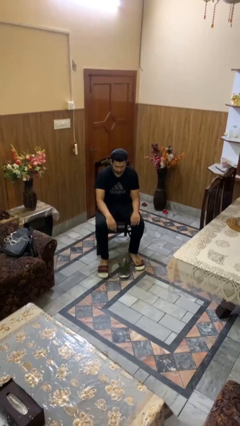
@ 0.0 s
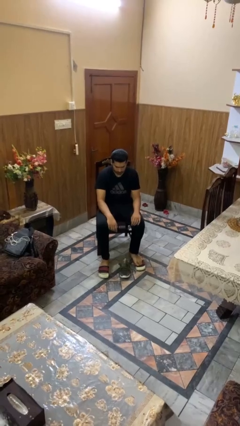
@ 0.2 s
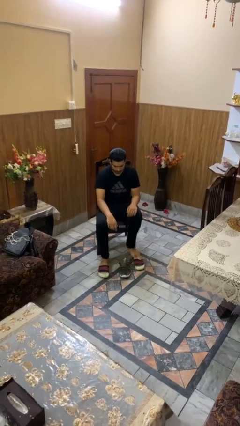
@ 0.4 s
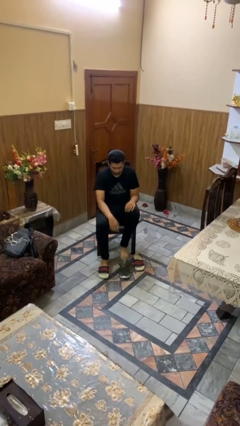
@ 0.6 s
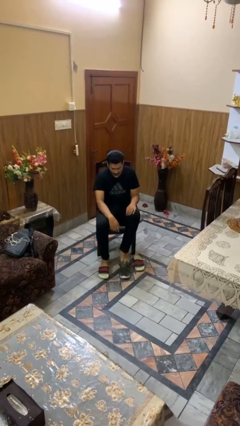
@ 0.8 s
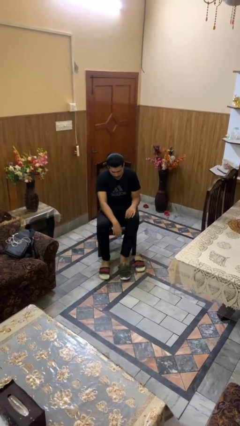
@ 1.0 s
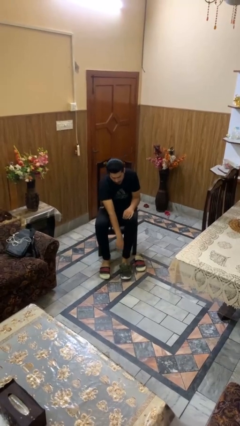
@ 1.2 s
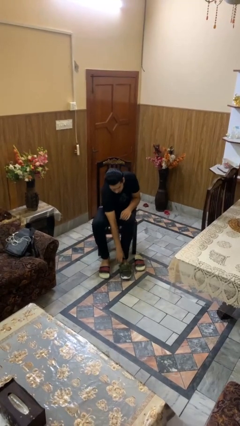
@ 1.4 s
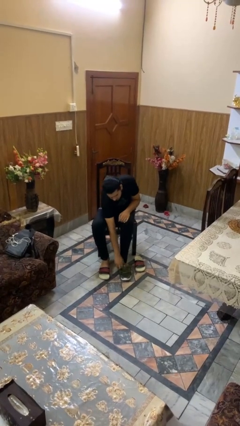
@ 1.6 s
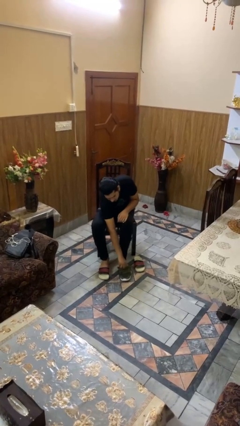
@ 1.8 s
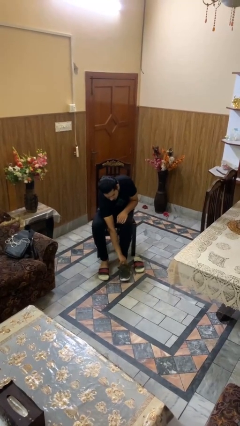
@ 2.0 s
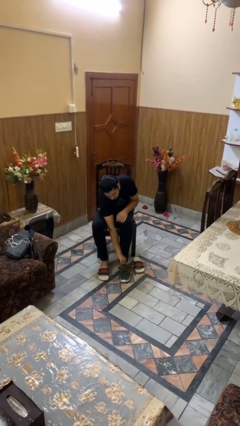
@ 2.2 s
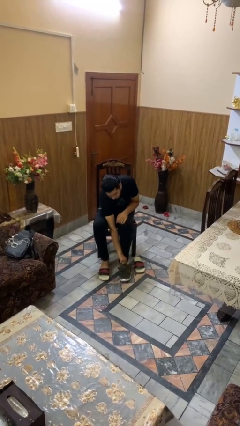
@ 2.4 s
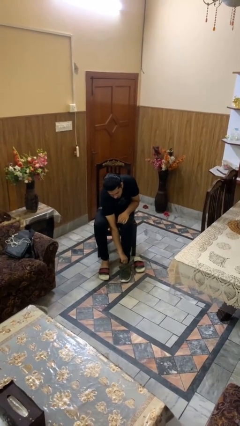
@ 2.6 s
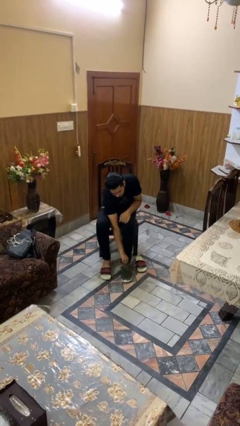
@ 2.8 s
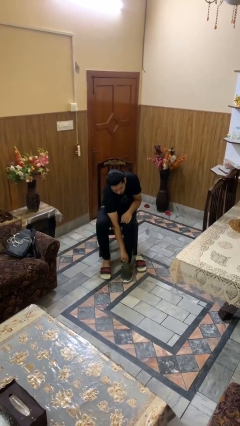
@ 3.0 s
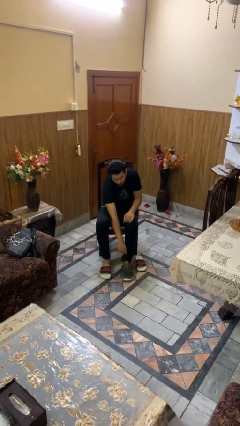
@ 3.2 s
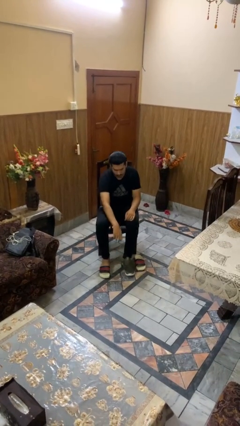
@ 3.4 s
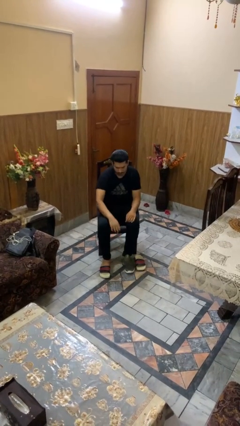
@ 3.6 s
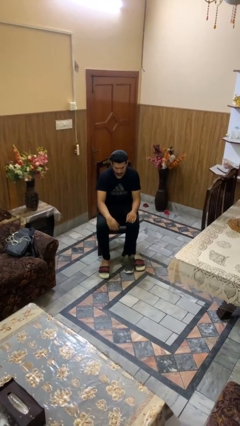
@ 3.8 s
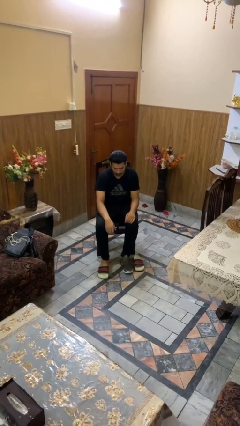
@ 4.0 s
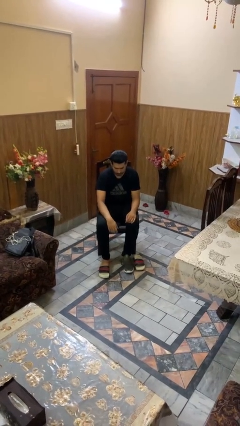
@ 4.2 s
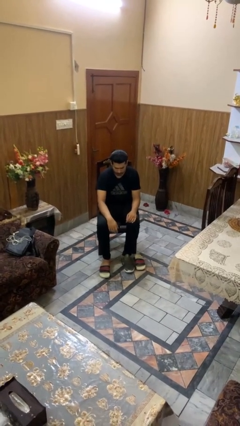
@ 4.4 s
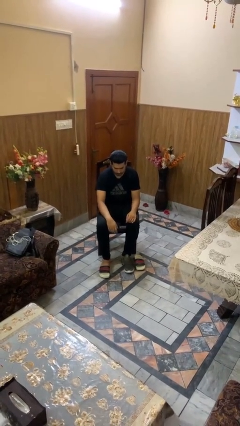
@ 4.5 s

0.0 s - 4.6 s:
person puts on shoes

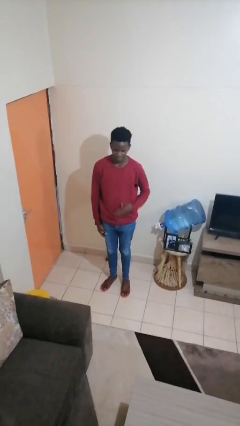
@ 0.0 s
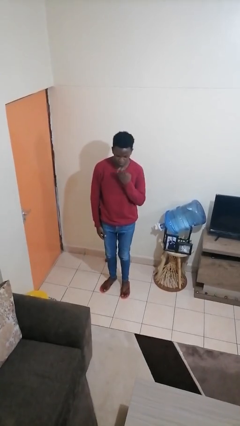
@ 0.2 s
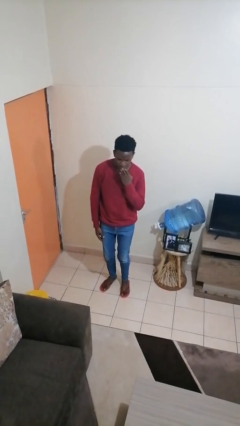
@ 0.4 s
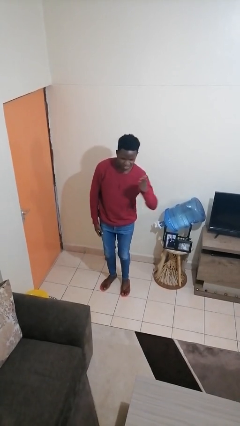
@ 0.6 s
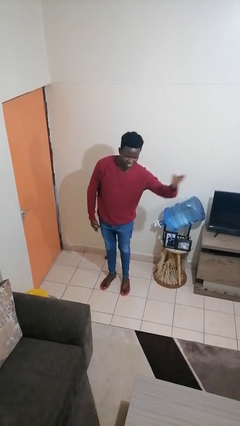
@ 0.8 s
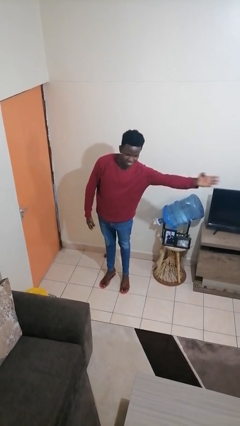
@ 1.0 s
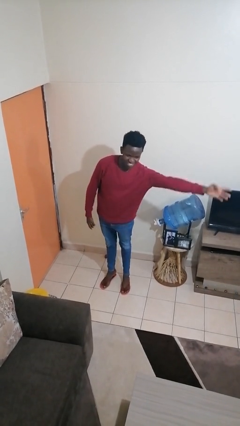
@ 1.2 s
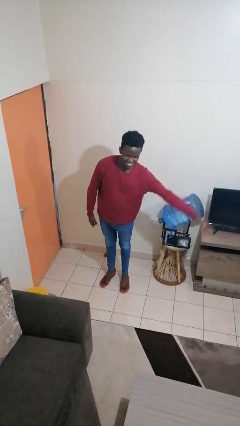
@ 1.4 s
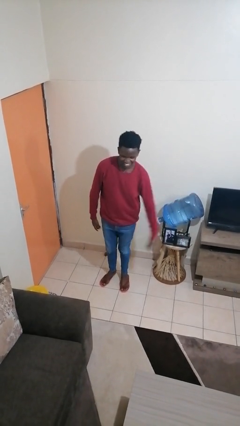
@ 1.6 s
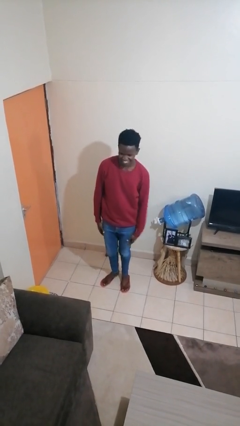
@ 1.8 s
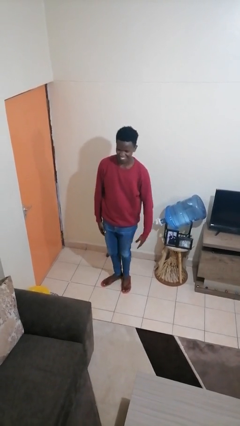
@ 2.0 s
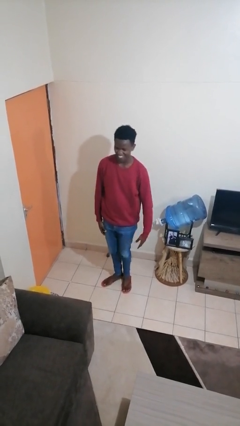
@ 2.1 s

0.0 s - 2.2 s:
person gestures blow kiss

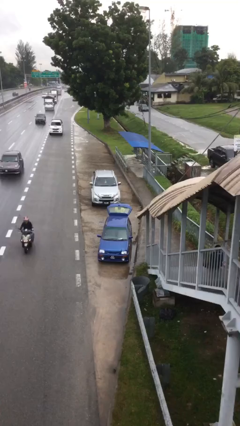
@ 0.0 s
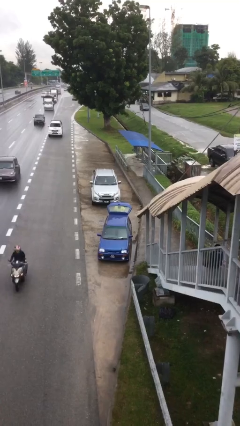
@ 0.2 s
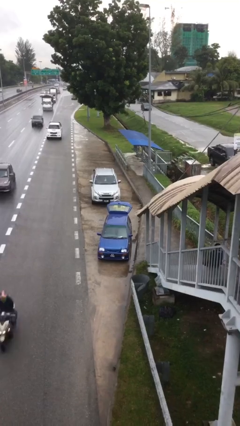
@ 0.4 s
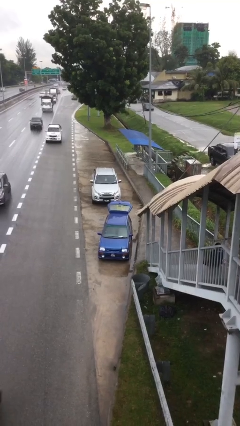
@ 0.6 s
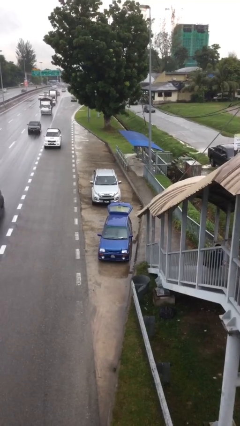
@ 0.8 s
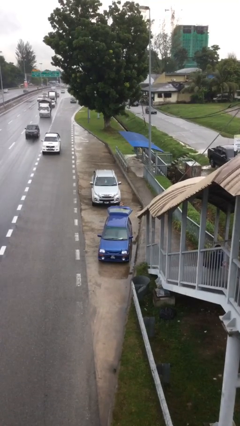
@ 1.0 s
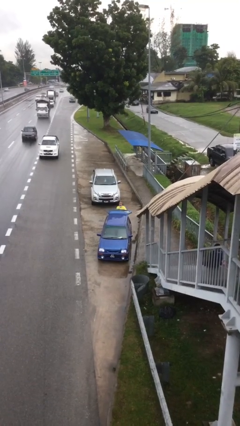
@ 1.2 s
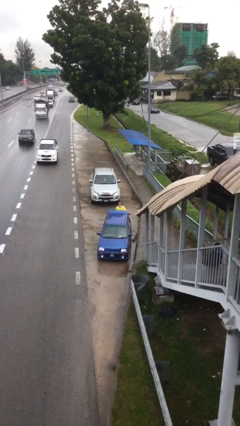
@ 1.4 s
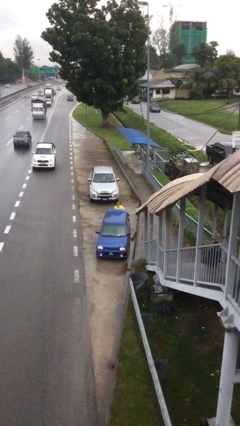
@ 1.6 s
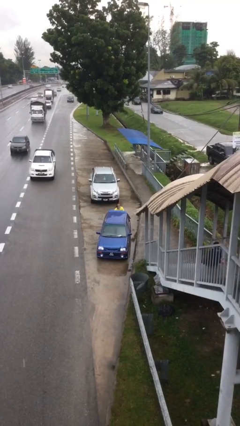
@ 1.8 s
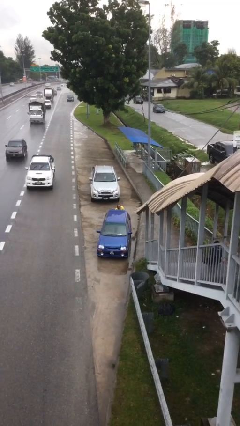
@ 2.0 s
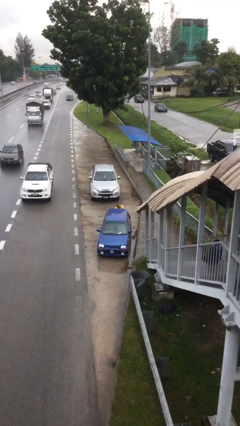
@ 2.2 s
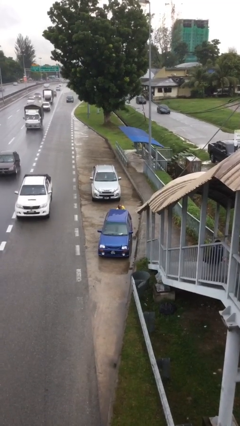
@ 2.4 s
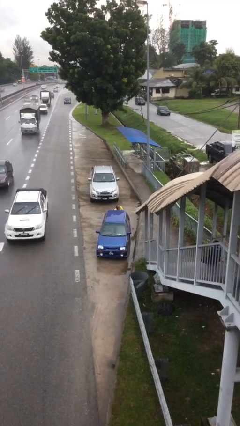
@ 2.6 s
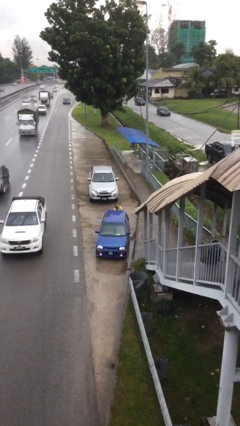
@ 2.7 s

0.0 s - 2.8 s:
person closes car trunk

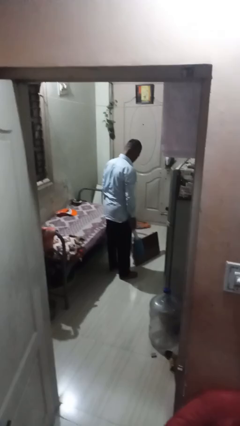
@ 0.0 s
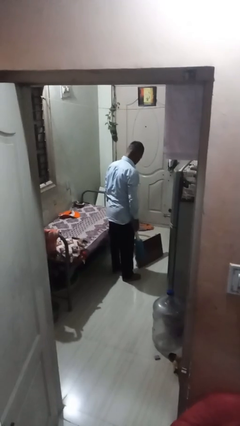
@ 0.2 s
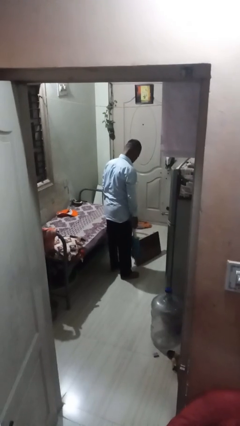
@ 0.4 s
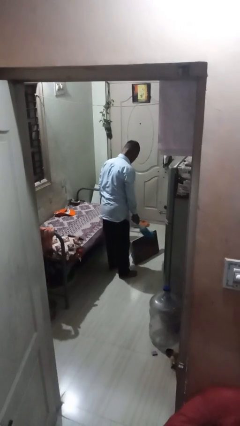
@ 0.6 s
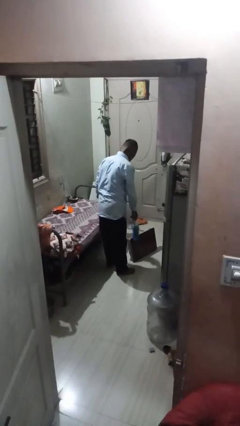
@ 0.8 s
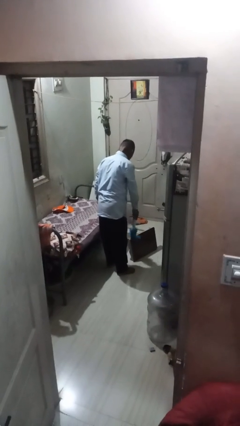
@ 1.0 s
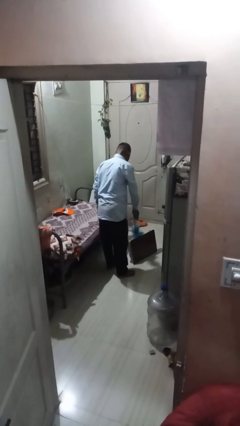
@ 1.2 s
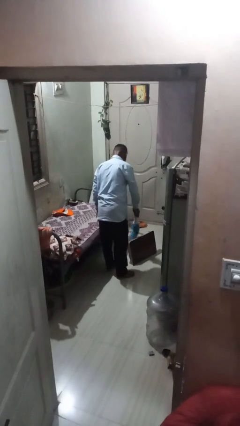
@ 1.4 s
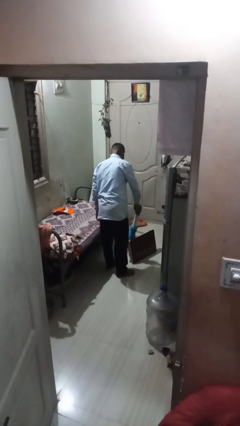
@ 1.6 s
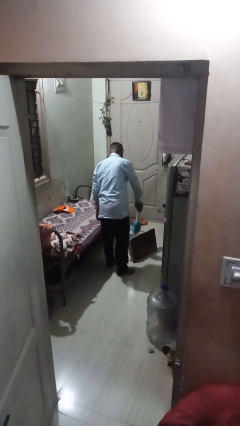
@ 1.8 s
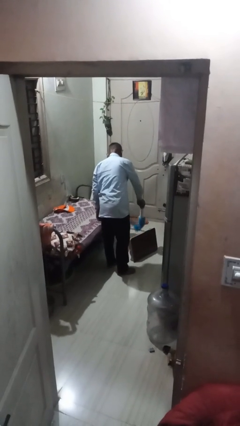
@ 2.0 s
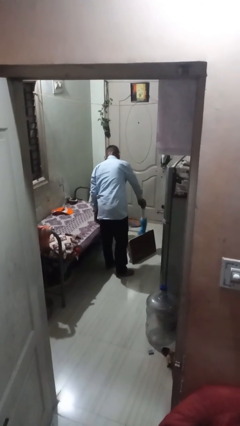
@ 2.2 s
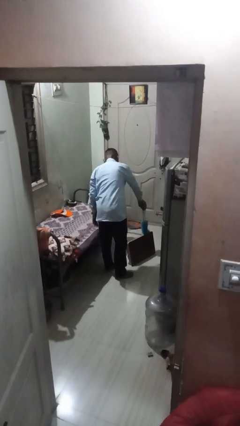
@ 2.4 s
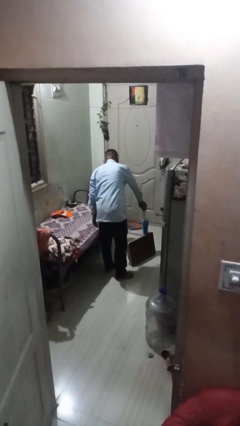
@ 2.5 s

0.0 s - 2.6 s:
person dusts furniture

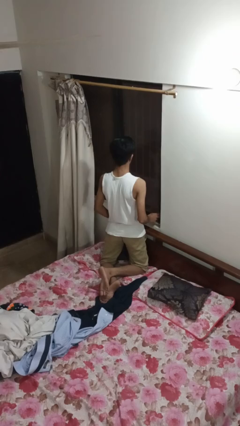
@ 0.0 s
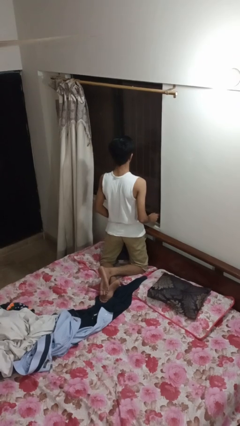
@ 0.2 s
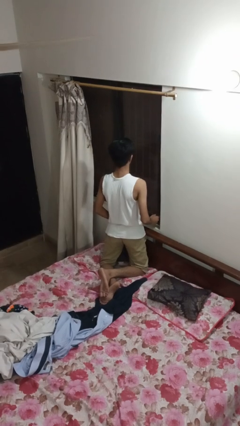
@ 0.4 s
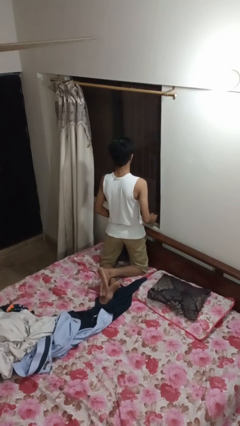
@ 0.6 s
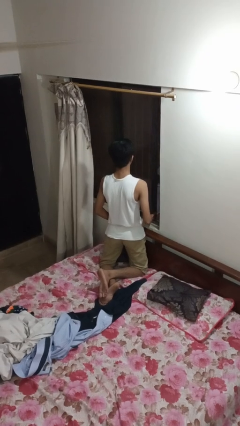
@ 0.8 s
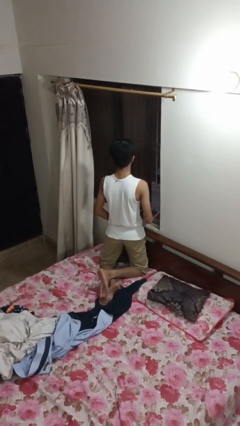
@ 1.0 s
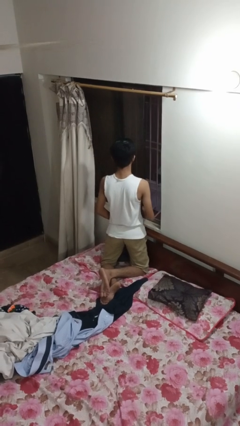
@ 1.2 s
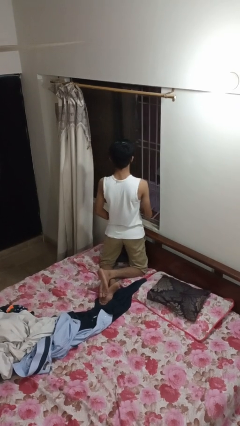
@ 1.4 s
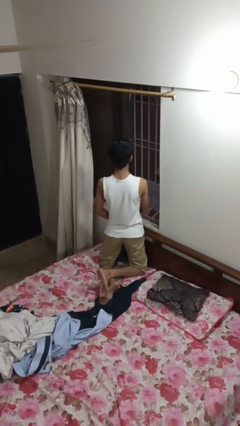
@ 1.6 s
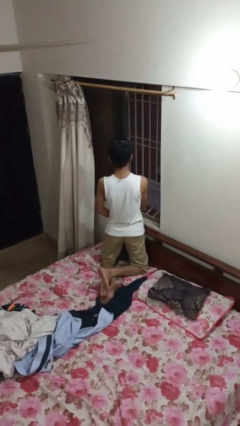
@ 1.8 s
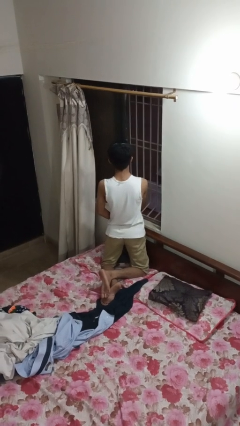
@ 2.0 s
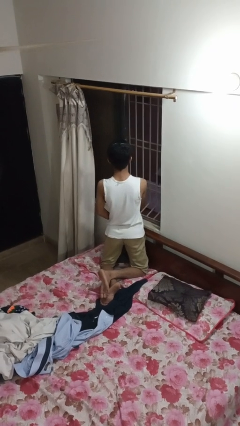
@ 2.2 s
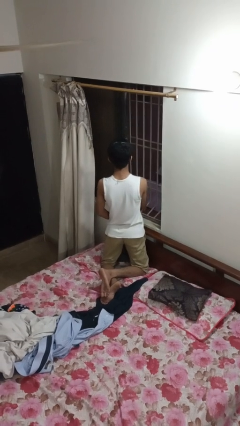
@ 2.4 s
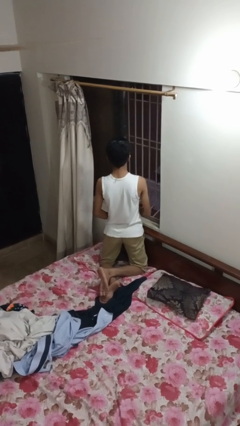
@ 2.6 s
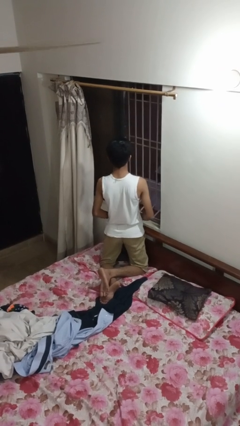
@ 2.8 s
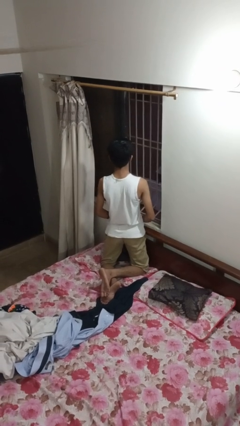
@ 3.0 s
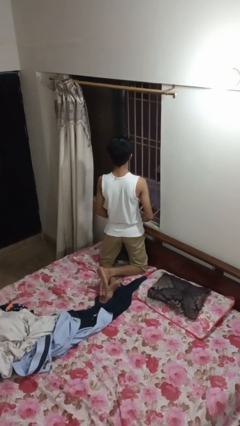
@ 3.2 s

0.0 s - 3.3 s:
person opens home window

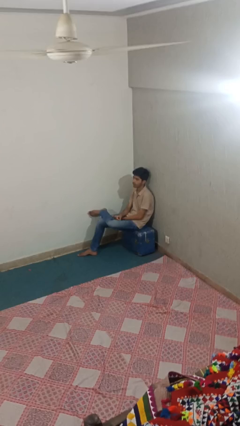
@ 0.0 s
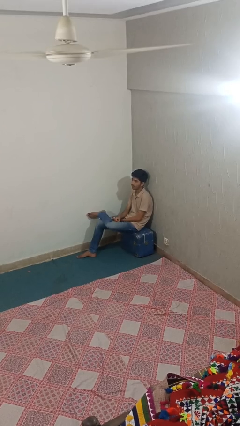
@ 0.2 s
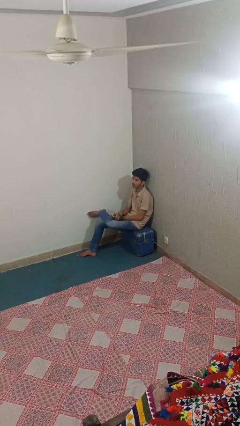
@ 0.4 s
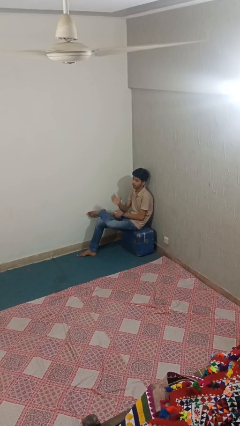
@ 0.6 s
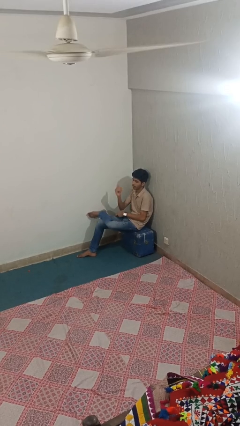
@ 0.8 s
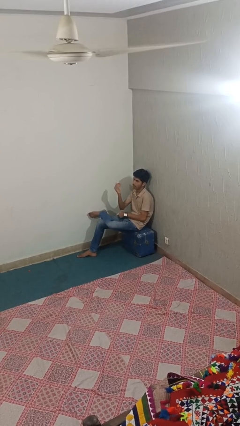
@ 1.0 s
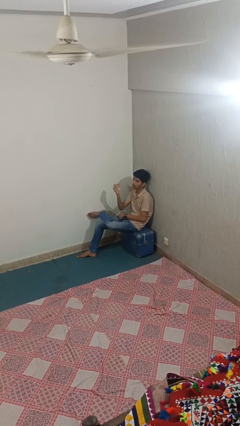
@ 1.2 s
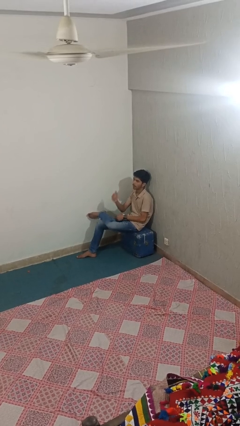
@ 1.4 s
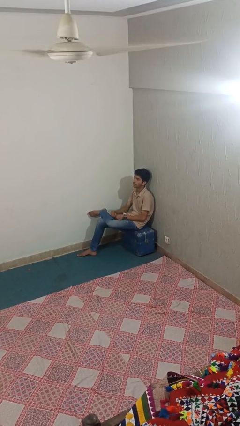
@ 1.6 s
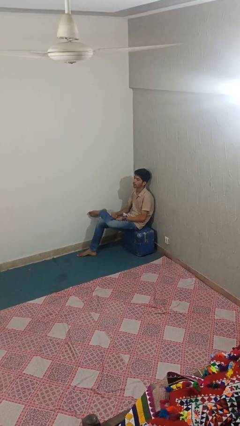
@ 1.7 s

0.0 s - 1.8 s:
person gestures come here

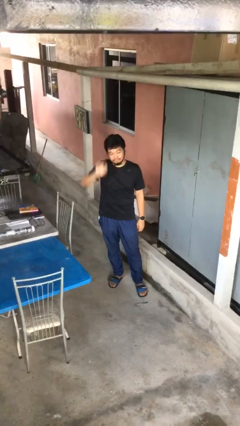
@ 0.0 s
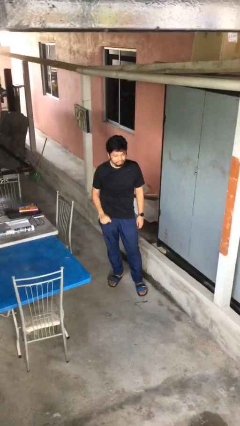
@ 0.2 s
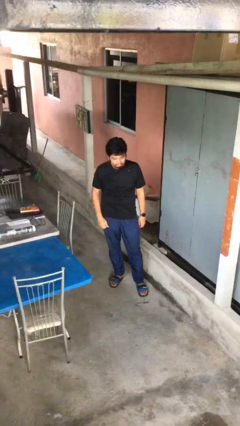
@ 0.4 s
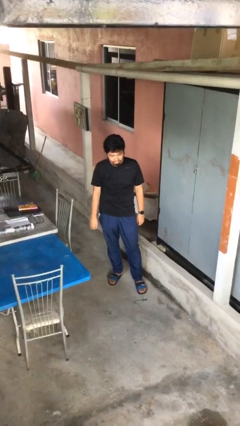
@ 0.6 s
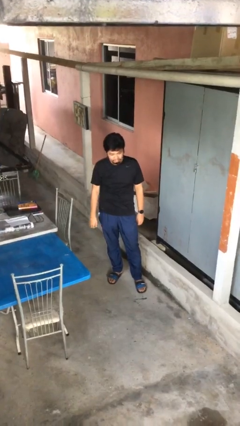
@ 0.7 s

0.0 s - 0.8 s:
person gestures lower hand
